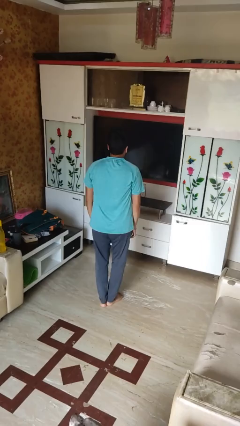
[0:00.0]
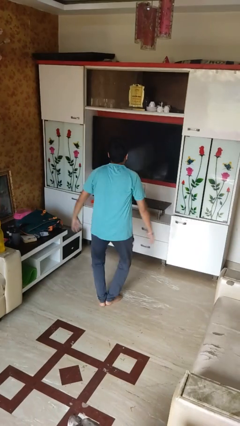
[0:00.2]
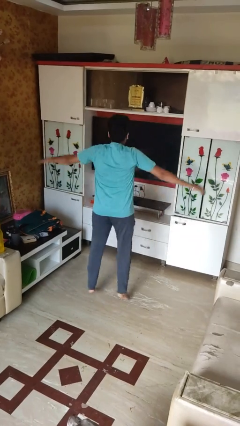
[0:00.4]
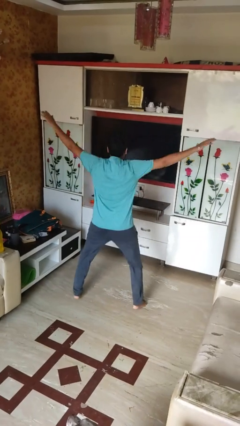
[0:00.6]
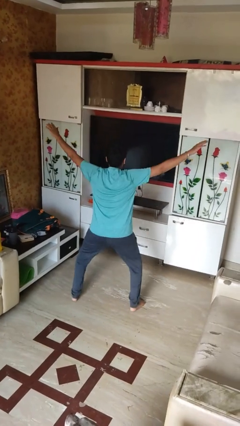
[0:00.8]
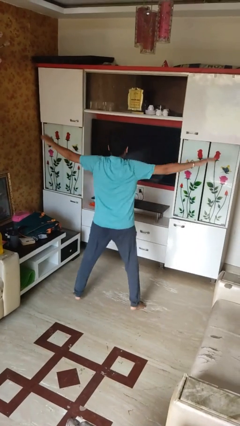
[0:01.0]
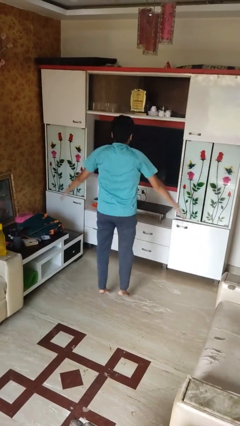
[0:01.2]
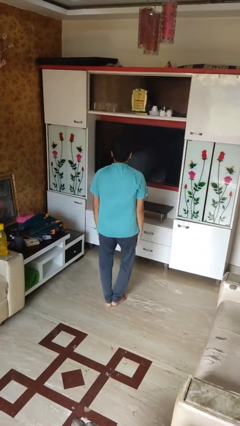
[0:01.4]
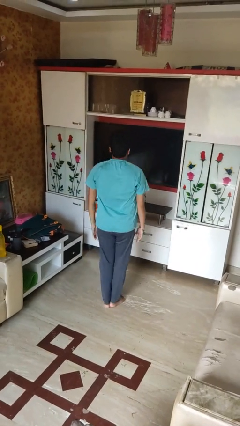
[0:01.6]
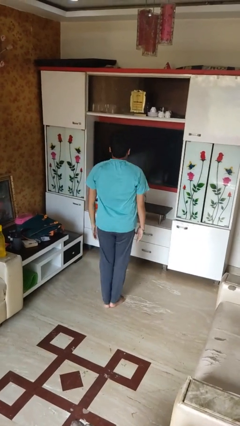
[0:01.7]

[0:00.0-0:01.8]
person exercises with jumping jacks

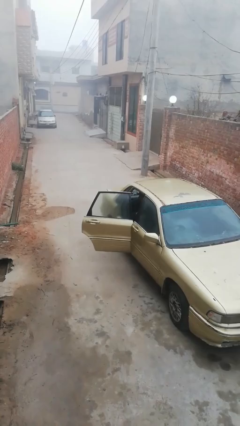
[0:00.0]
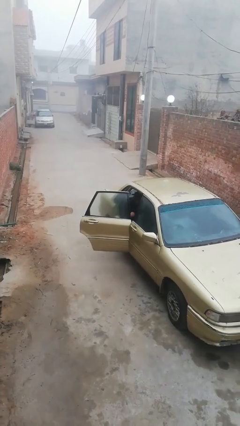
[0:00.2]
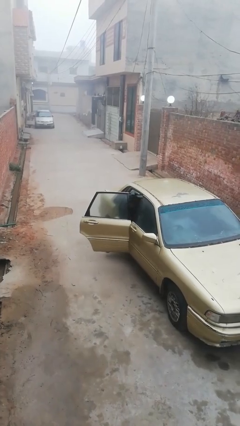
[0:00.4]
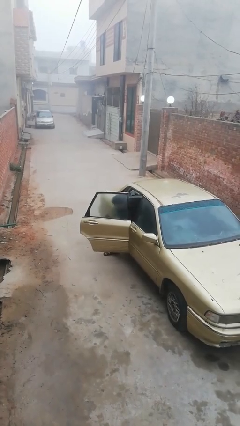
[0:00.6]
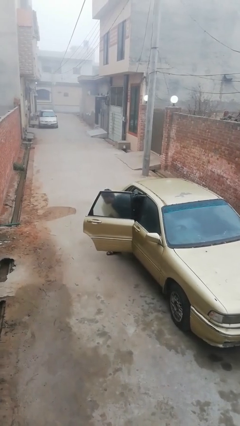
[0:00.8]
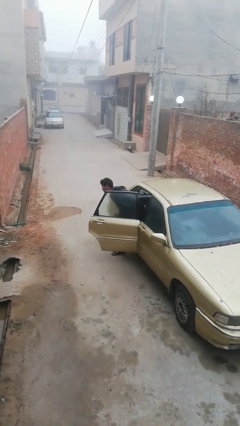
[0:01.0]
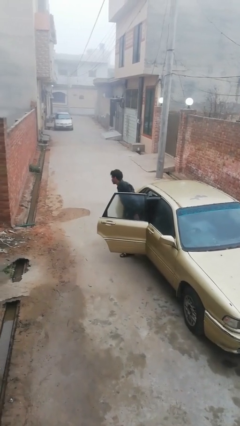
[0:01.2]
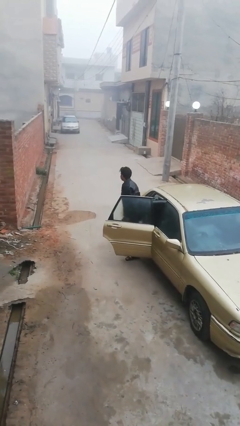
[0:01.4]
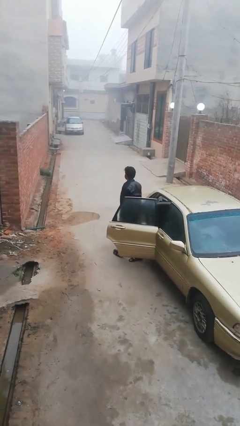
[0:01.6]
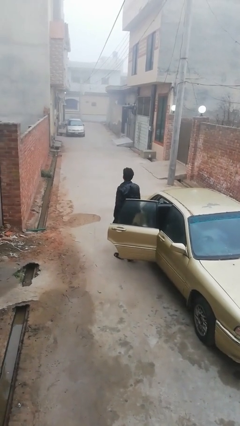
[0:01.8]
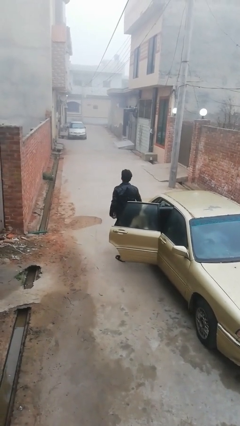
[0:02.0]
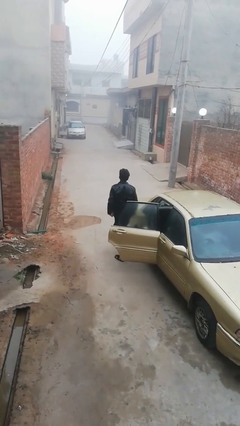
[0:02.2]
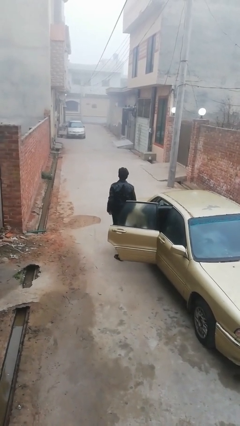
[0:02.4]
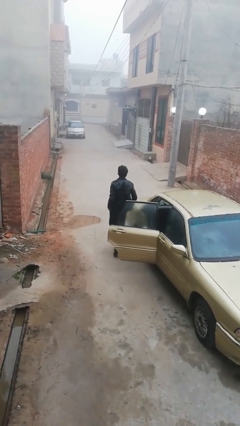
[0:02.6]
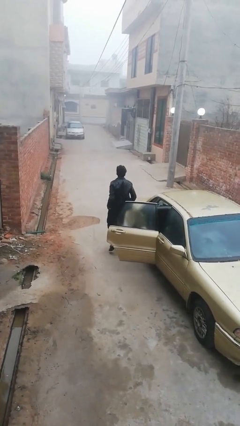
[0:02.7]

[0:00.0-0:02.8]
person exits car

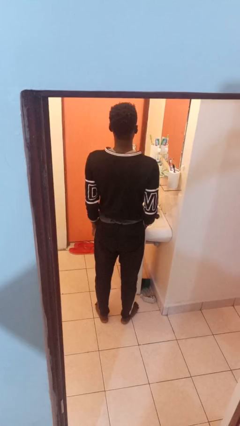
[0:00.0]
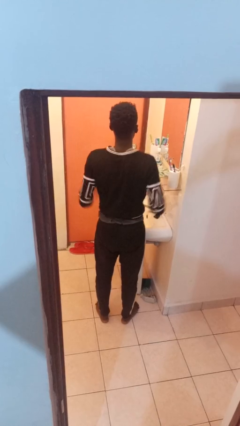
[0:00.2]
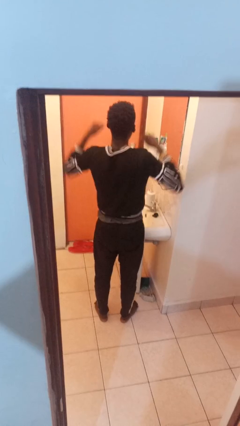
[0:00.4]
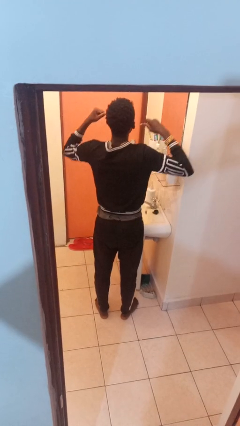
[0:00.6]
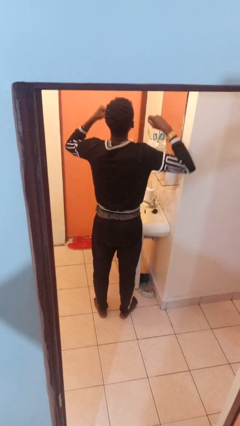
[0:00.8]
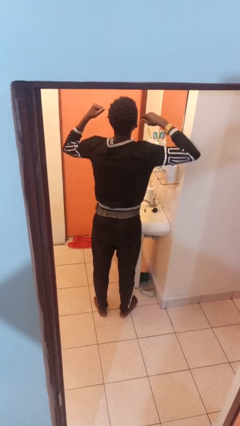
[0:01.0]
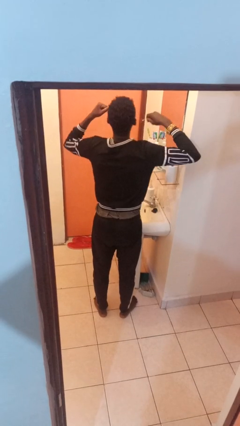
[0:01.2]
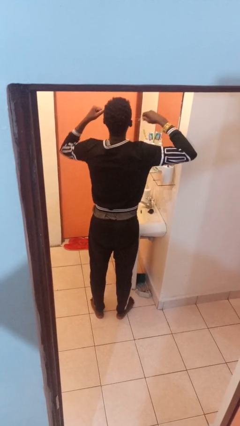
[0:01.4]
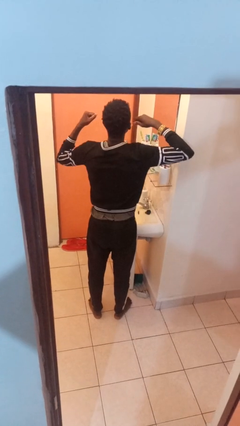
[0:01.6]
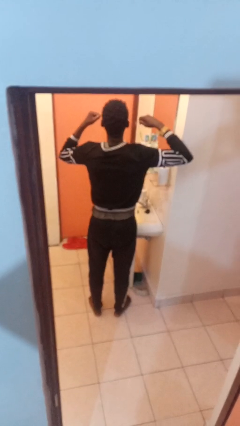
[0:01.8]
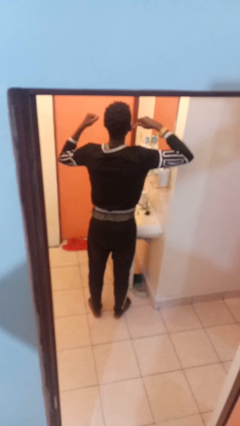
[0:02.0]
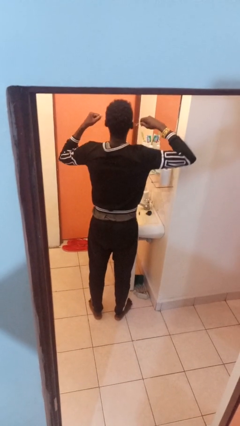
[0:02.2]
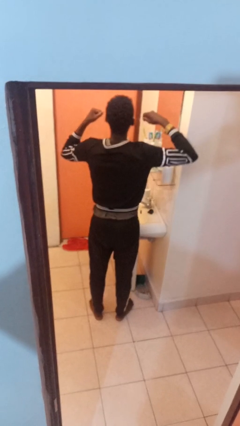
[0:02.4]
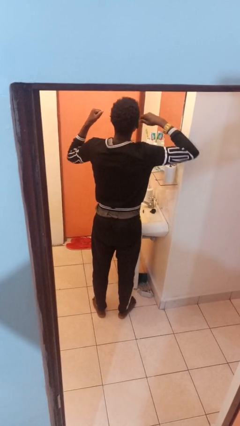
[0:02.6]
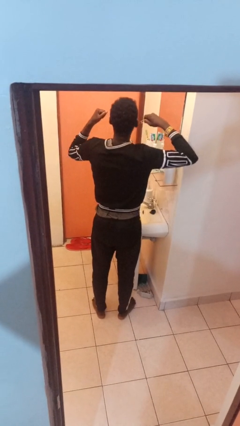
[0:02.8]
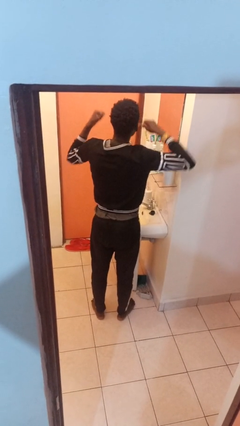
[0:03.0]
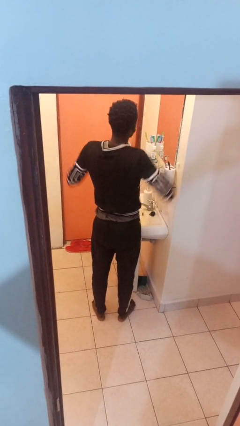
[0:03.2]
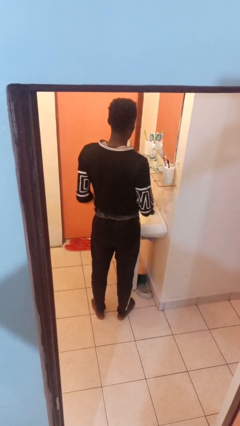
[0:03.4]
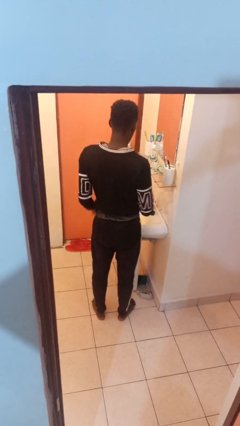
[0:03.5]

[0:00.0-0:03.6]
person flosses

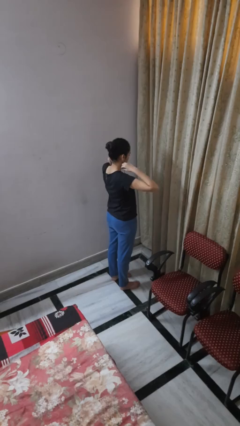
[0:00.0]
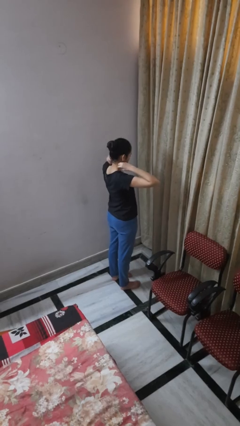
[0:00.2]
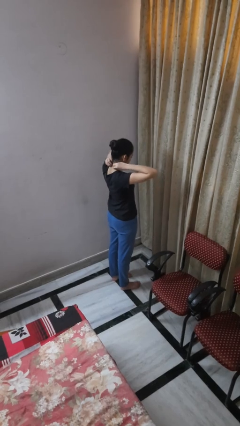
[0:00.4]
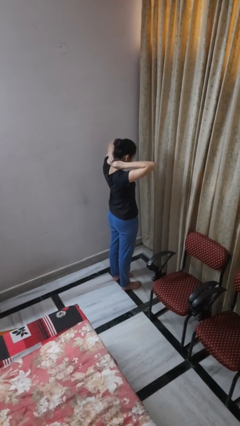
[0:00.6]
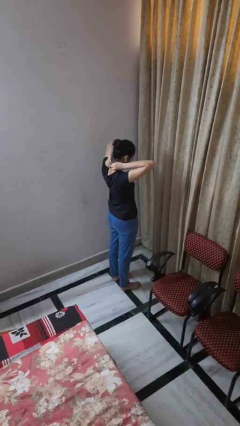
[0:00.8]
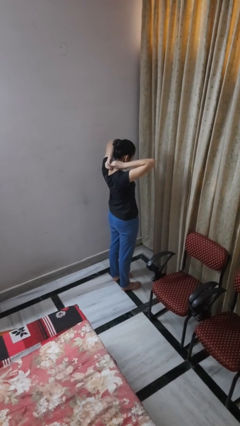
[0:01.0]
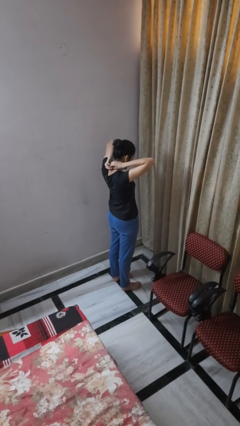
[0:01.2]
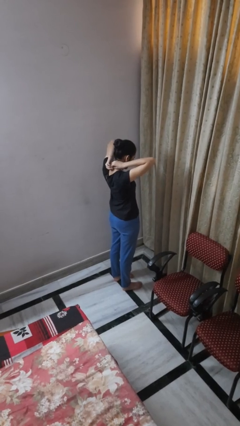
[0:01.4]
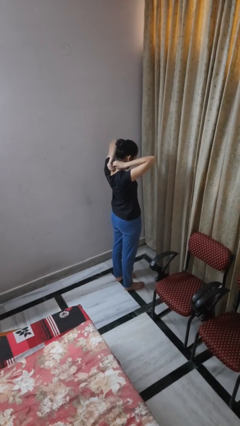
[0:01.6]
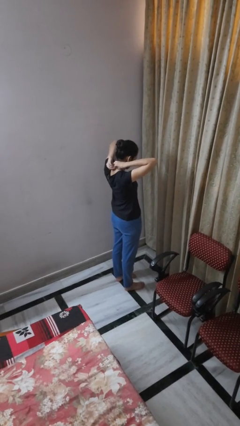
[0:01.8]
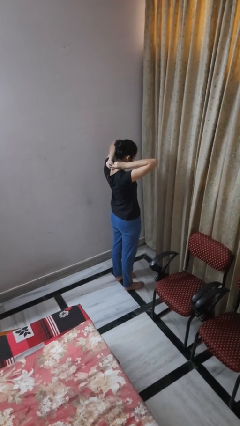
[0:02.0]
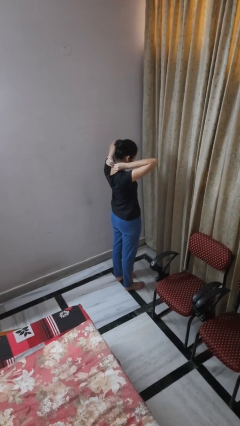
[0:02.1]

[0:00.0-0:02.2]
person puts on necklace

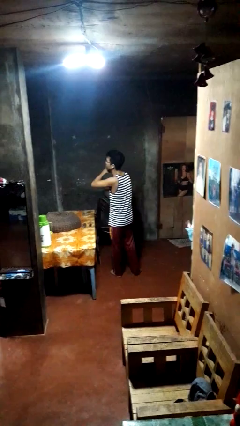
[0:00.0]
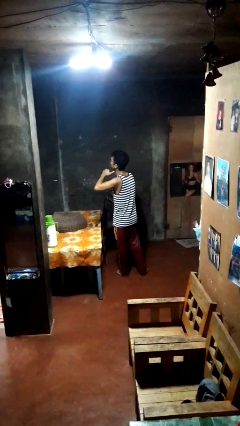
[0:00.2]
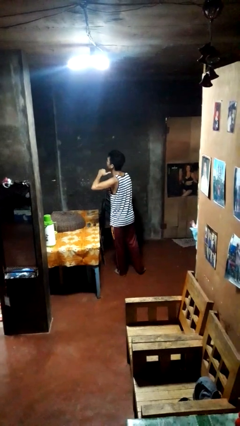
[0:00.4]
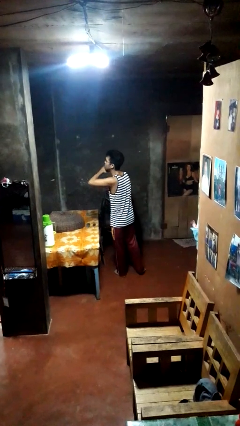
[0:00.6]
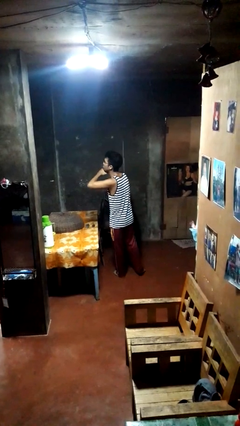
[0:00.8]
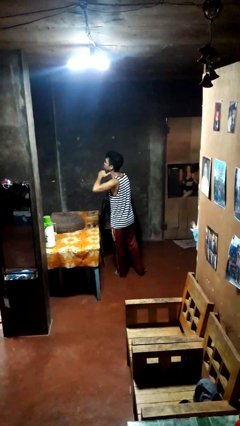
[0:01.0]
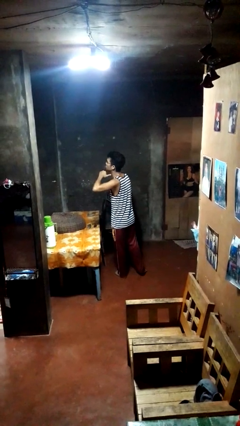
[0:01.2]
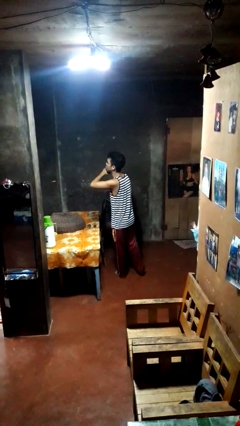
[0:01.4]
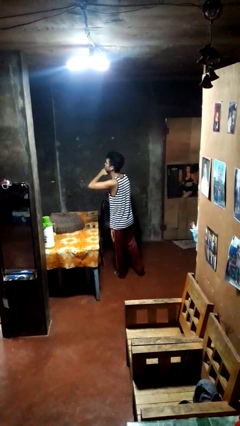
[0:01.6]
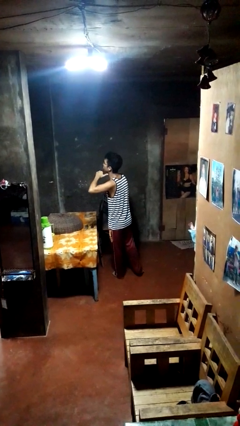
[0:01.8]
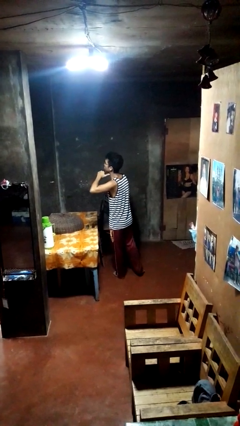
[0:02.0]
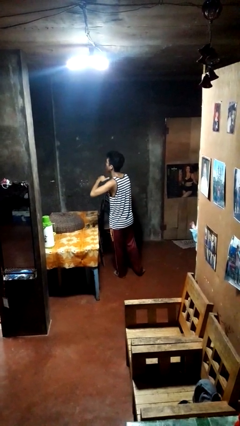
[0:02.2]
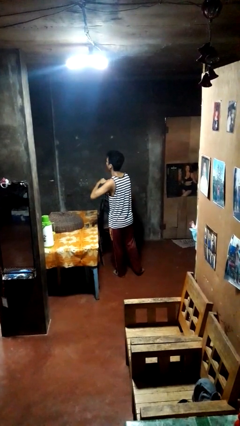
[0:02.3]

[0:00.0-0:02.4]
person gestures cut

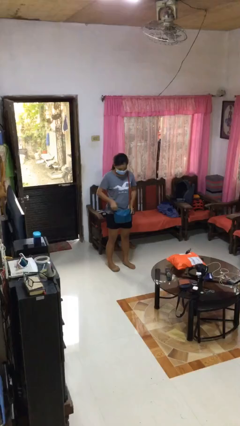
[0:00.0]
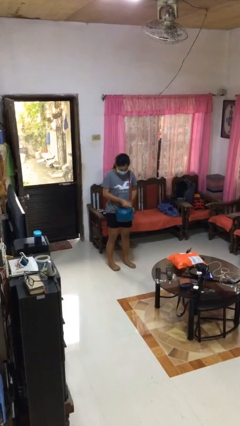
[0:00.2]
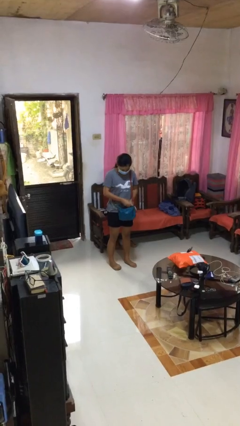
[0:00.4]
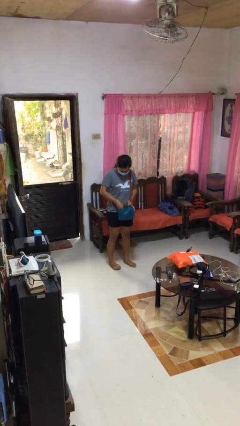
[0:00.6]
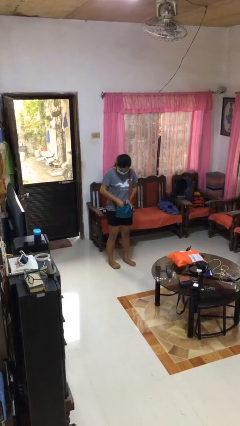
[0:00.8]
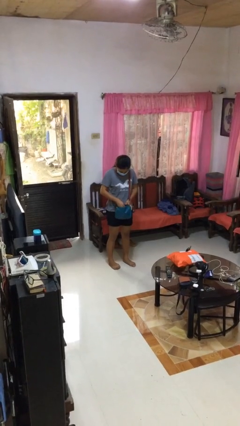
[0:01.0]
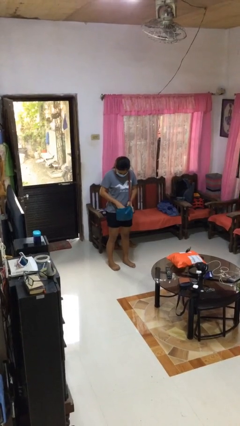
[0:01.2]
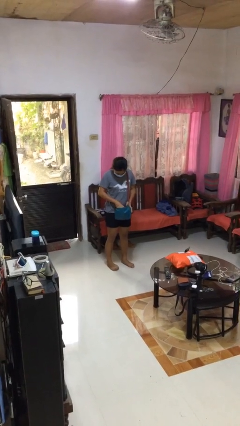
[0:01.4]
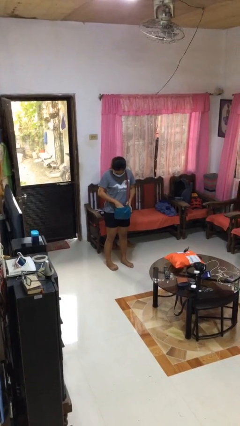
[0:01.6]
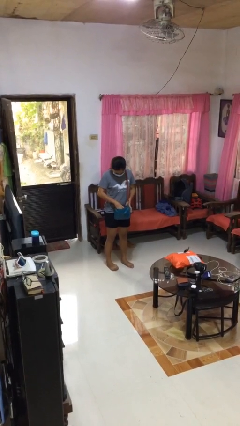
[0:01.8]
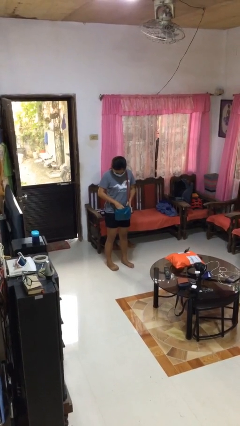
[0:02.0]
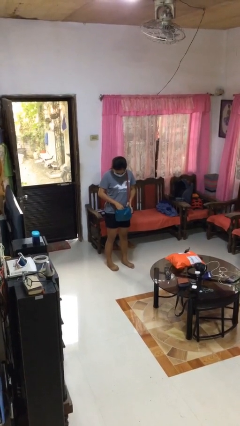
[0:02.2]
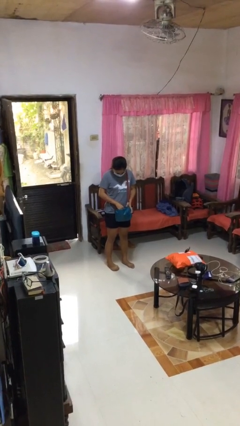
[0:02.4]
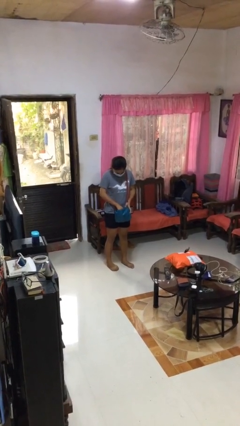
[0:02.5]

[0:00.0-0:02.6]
person searches in purse

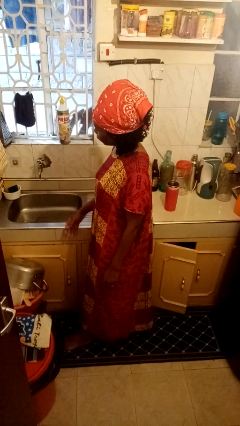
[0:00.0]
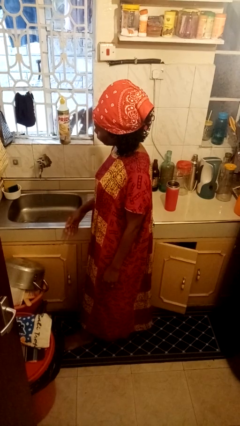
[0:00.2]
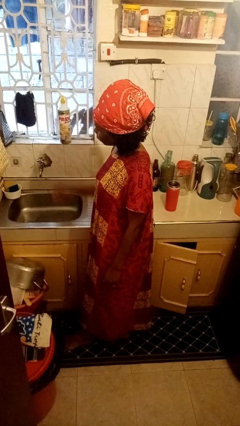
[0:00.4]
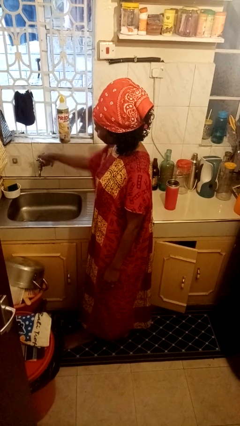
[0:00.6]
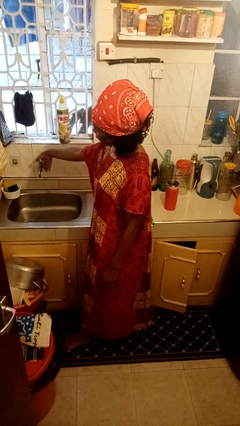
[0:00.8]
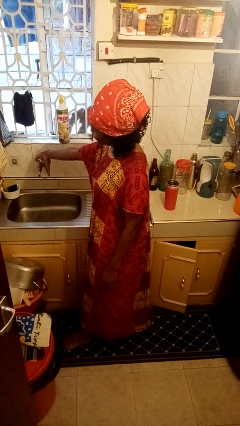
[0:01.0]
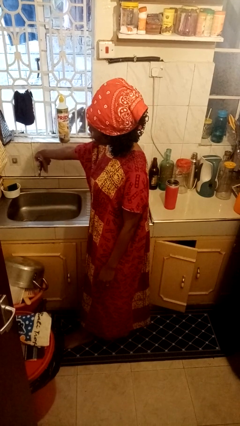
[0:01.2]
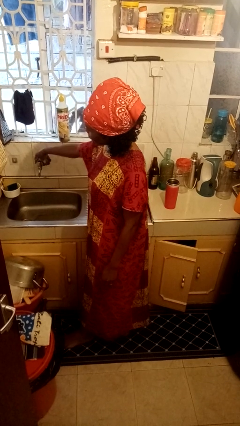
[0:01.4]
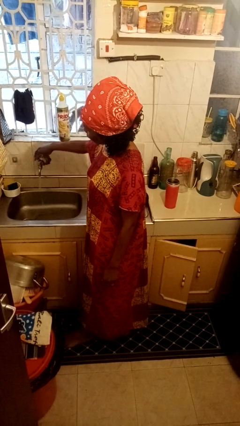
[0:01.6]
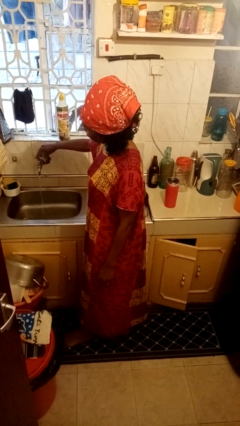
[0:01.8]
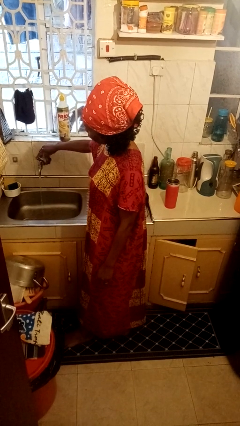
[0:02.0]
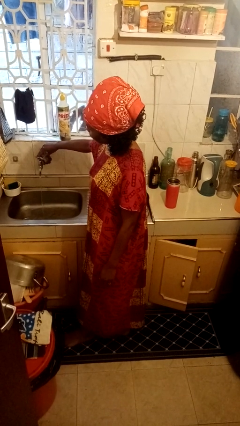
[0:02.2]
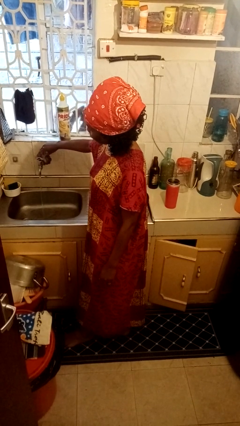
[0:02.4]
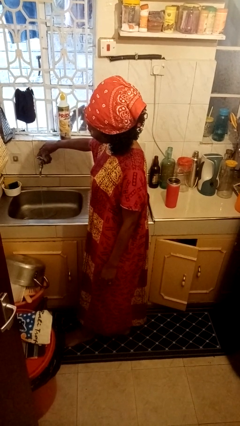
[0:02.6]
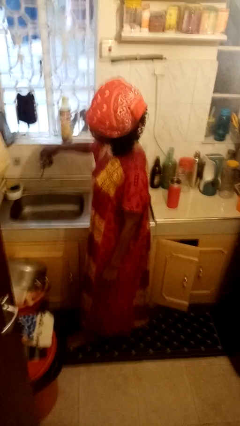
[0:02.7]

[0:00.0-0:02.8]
person turns on faucet
